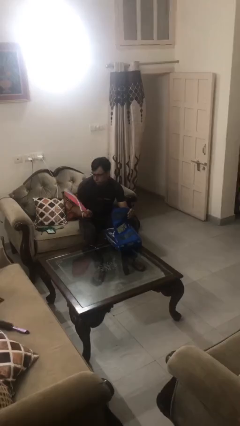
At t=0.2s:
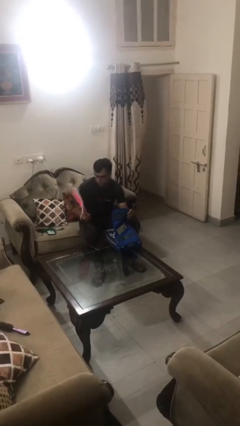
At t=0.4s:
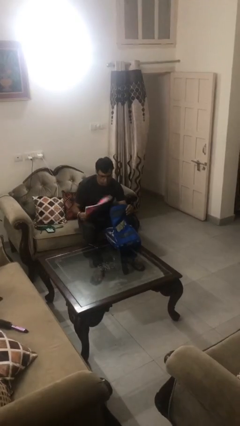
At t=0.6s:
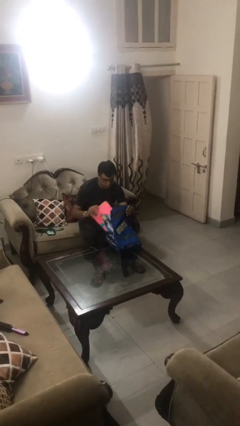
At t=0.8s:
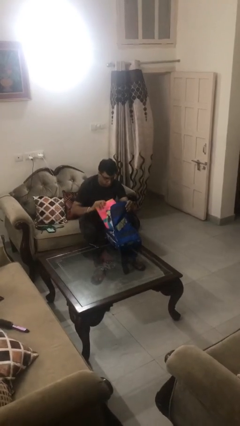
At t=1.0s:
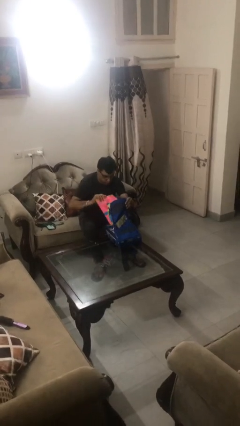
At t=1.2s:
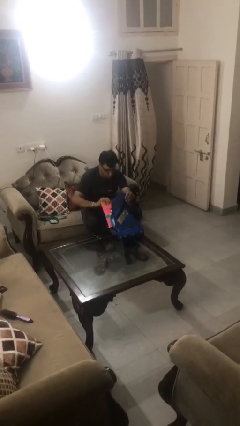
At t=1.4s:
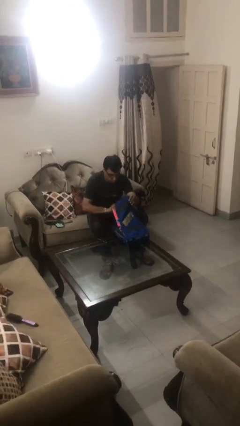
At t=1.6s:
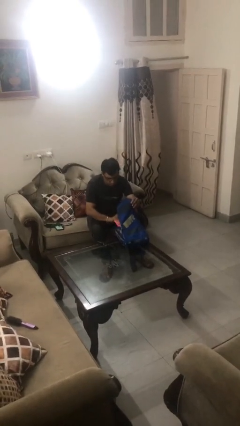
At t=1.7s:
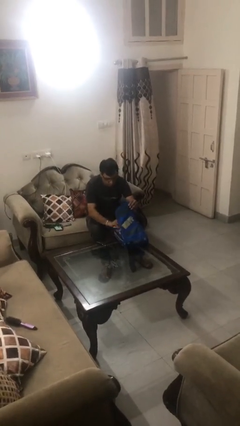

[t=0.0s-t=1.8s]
person puts object into backpack

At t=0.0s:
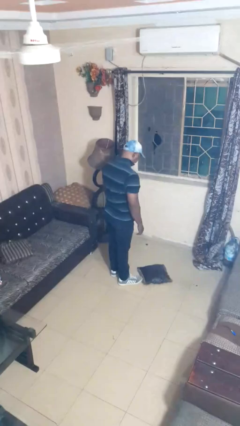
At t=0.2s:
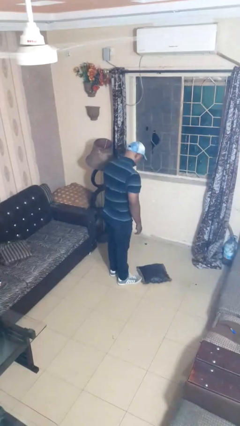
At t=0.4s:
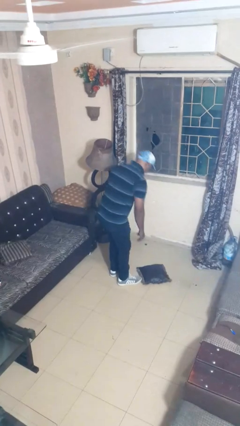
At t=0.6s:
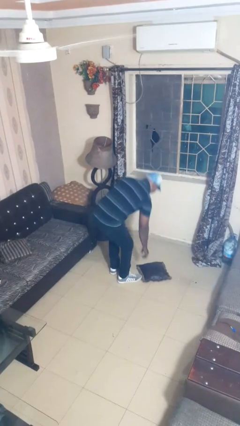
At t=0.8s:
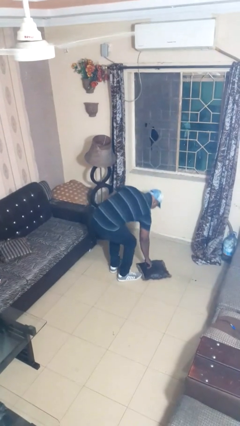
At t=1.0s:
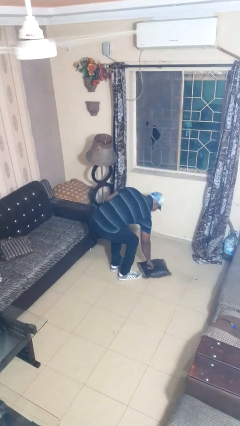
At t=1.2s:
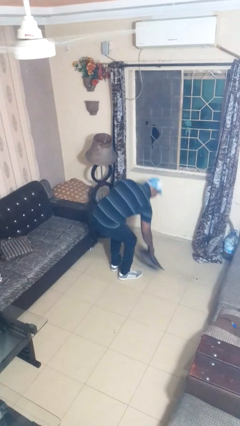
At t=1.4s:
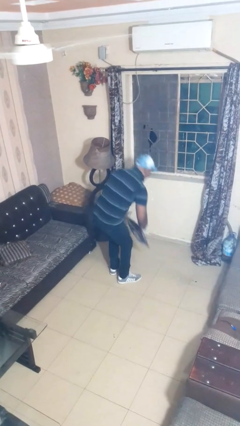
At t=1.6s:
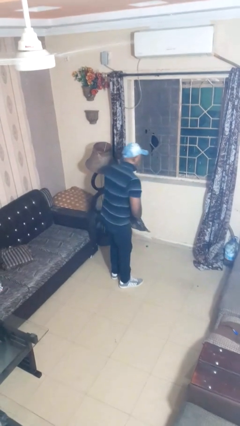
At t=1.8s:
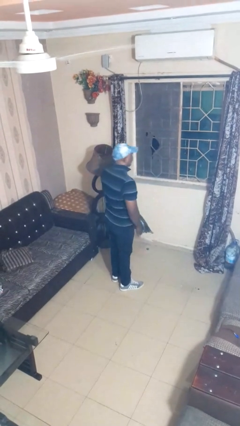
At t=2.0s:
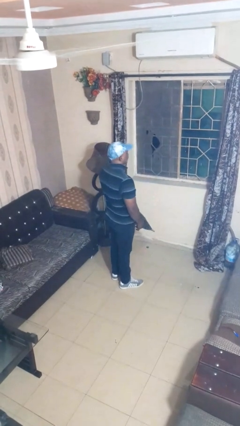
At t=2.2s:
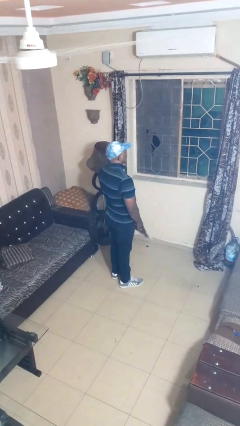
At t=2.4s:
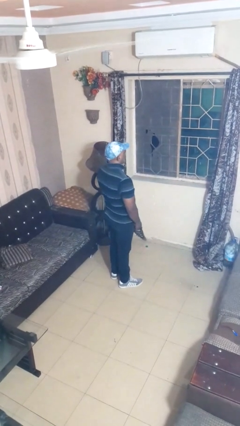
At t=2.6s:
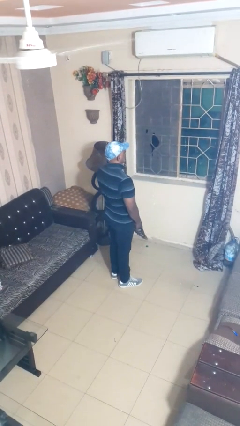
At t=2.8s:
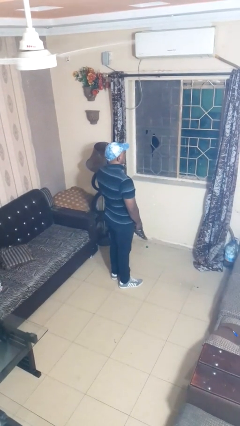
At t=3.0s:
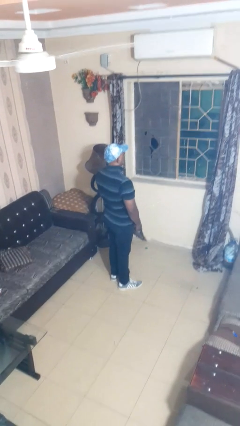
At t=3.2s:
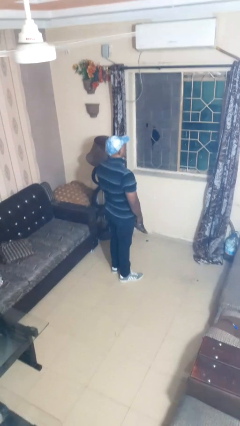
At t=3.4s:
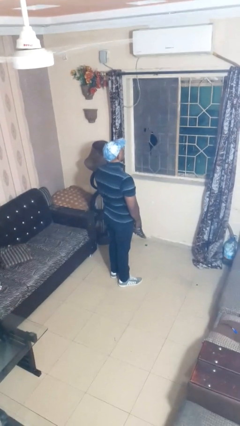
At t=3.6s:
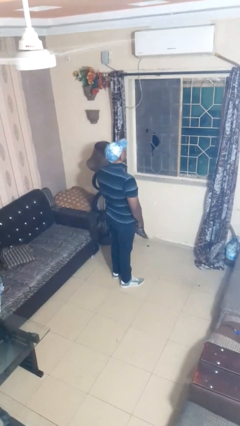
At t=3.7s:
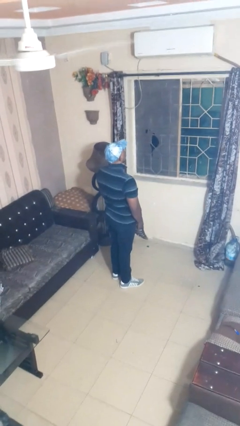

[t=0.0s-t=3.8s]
person picks up object from floor

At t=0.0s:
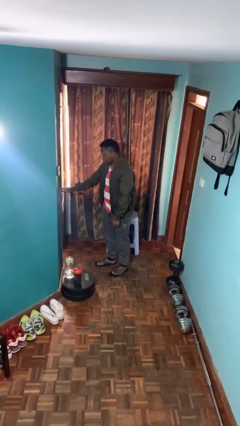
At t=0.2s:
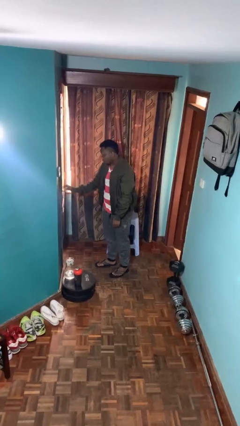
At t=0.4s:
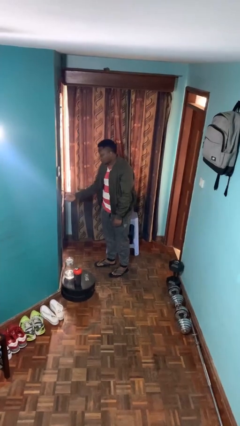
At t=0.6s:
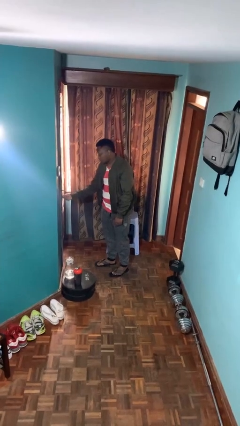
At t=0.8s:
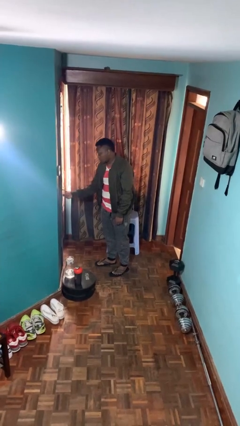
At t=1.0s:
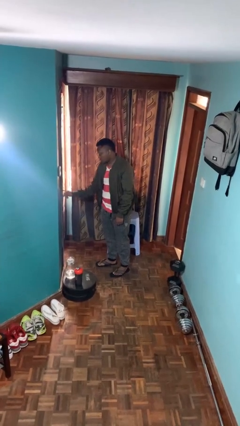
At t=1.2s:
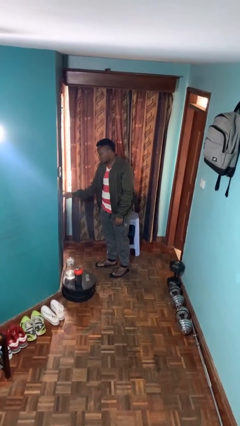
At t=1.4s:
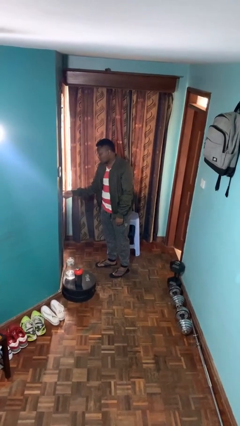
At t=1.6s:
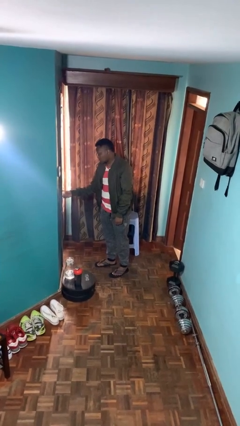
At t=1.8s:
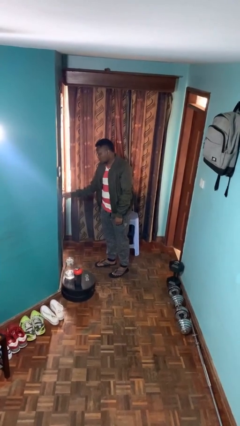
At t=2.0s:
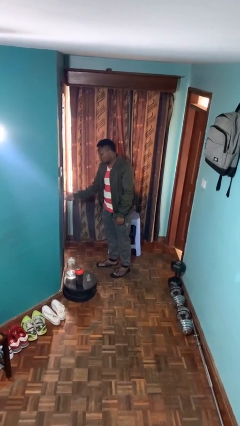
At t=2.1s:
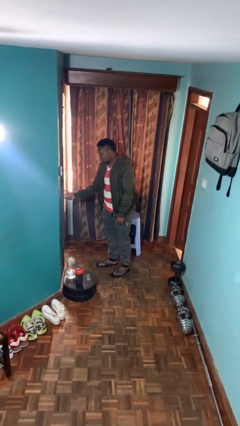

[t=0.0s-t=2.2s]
person locks door with keys

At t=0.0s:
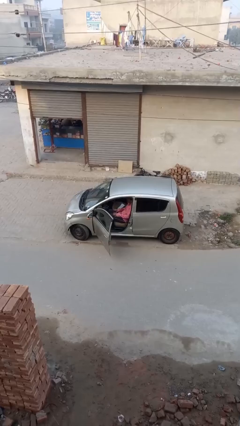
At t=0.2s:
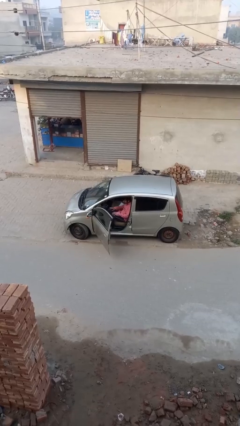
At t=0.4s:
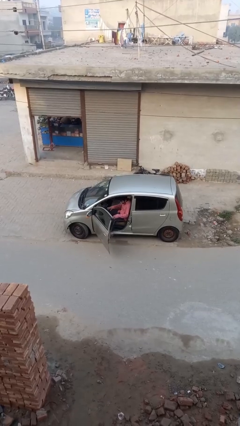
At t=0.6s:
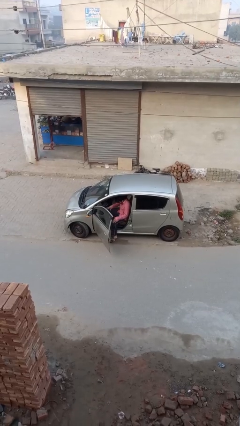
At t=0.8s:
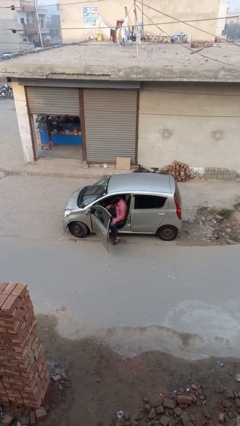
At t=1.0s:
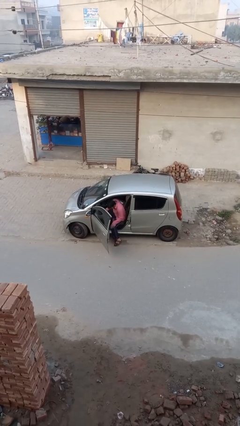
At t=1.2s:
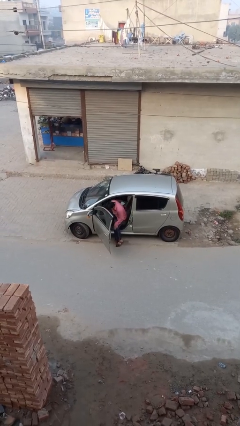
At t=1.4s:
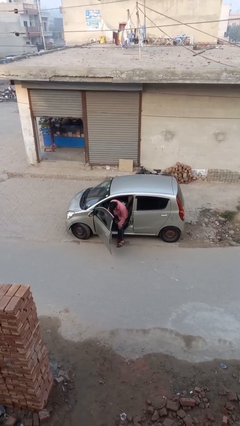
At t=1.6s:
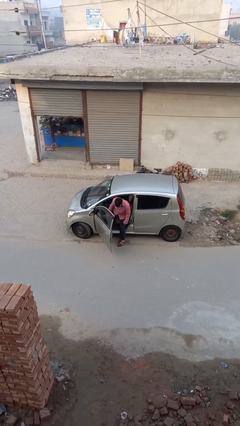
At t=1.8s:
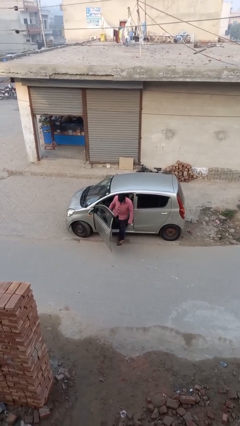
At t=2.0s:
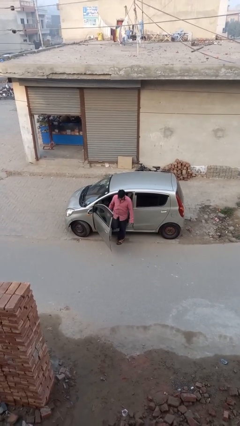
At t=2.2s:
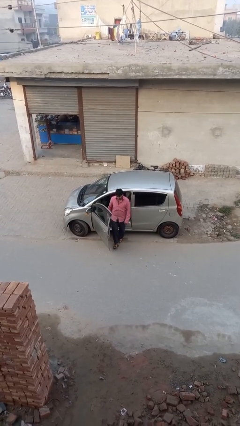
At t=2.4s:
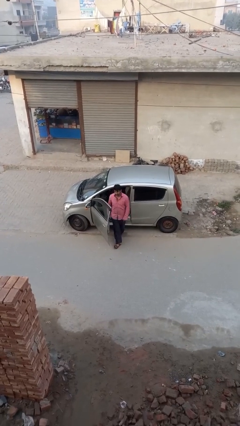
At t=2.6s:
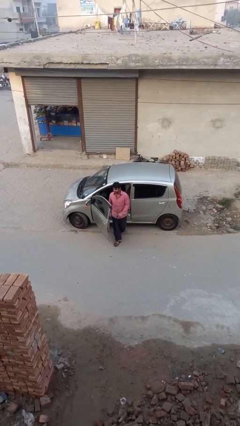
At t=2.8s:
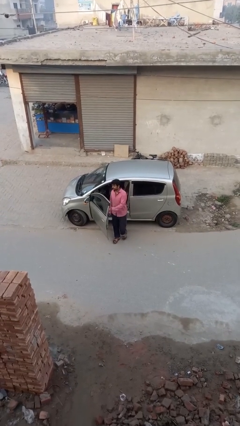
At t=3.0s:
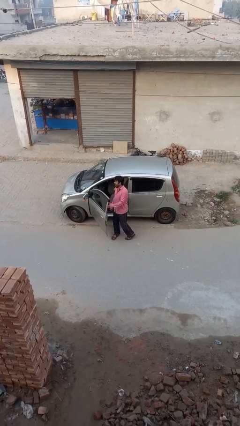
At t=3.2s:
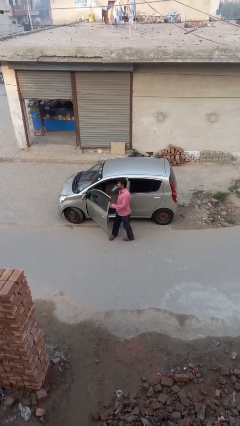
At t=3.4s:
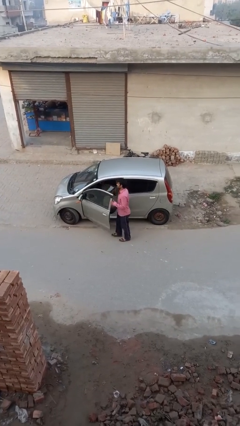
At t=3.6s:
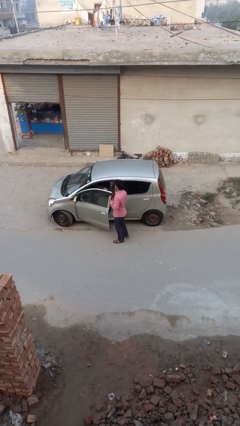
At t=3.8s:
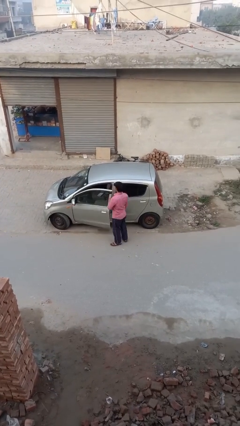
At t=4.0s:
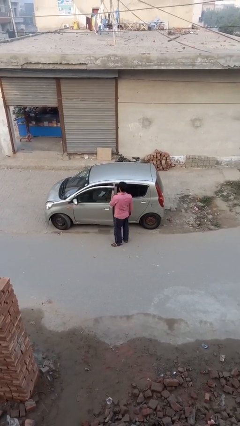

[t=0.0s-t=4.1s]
person exits car

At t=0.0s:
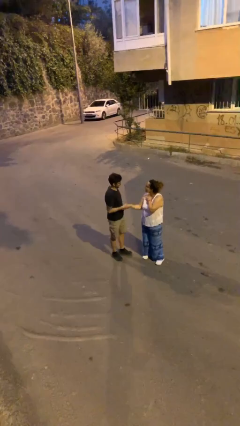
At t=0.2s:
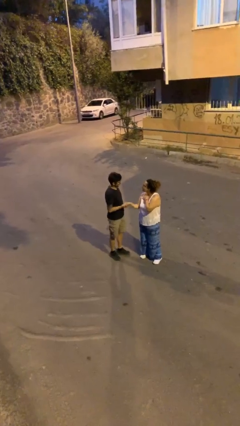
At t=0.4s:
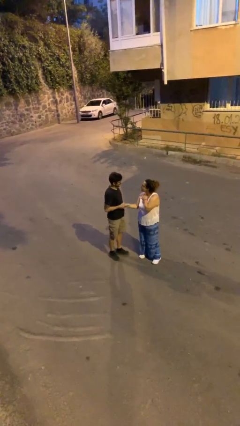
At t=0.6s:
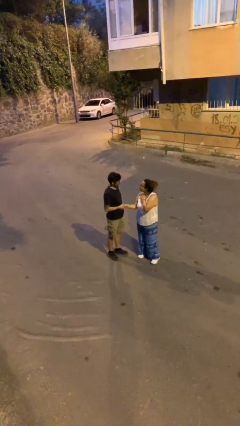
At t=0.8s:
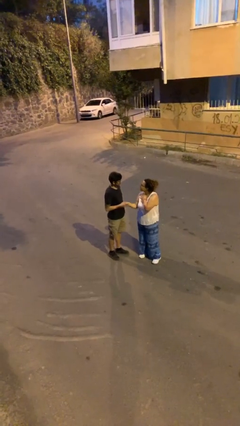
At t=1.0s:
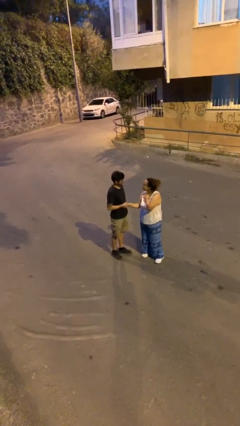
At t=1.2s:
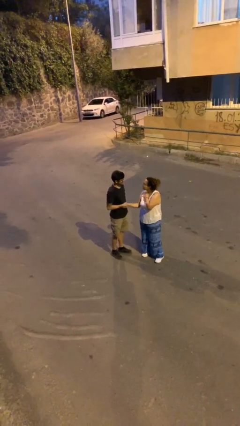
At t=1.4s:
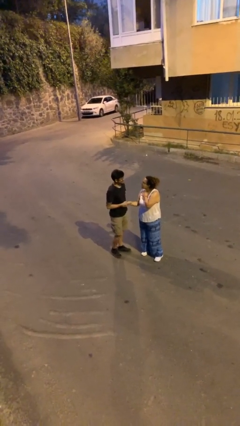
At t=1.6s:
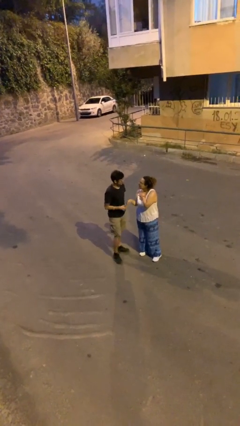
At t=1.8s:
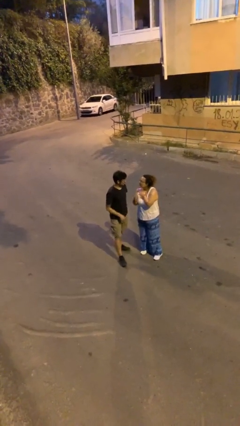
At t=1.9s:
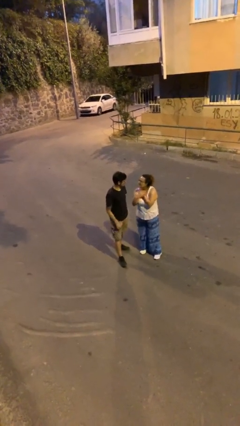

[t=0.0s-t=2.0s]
person shakes hand

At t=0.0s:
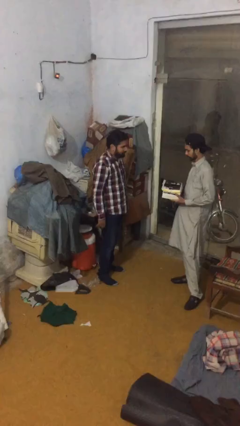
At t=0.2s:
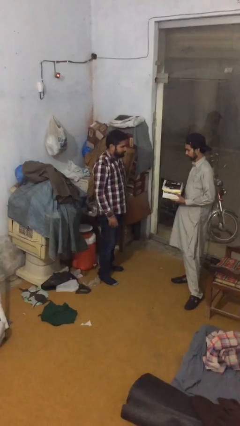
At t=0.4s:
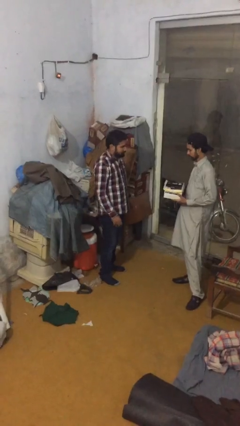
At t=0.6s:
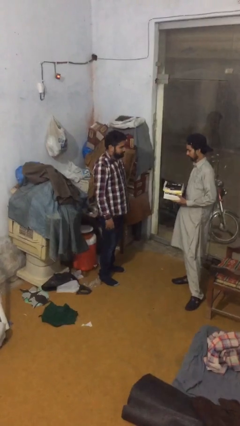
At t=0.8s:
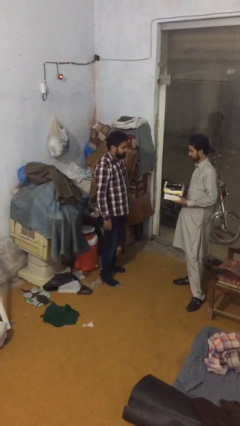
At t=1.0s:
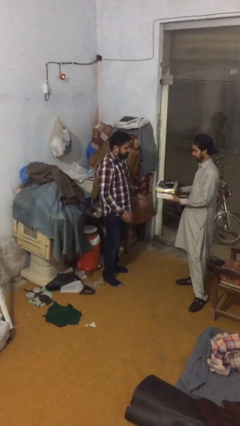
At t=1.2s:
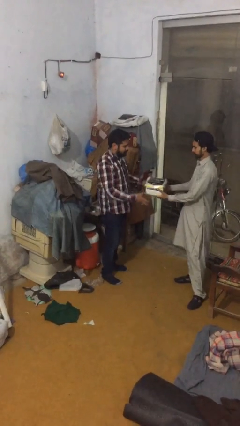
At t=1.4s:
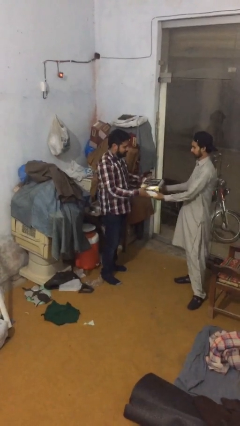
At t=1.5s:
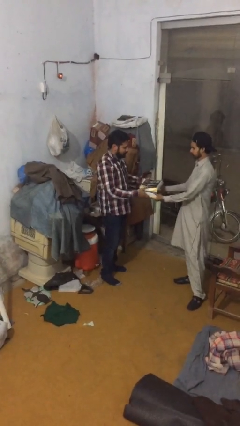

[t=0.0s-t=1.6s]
person transfers object to person

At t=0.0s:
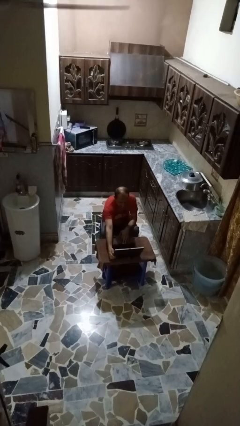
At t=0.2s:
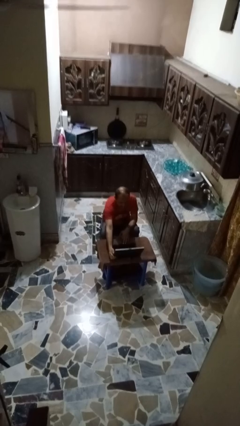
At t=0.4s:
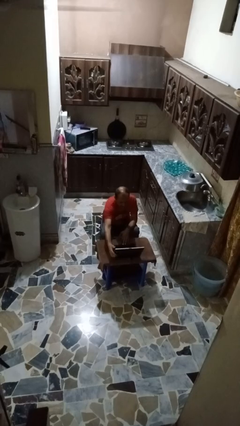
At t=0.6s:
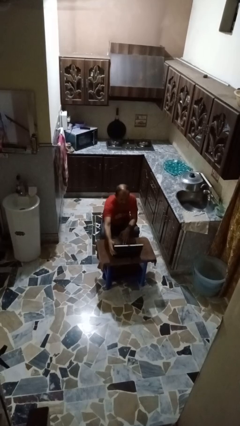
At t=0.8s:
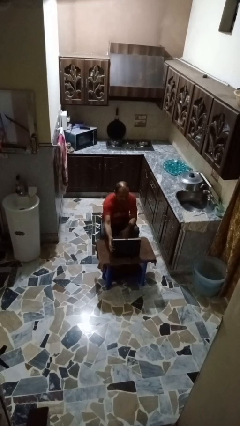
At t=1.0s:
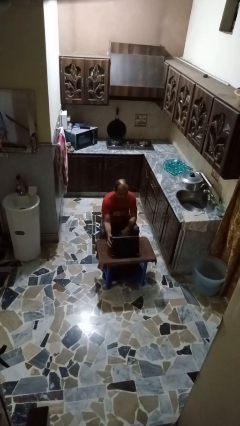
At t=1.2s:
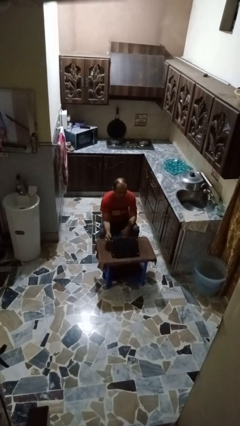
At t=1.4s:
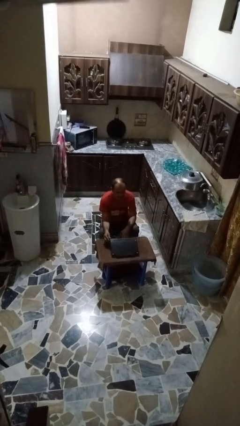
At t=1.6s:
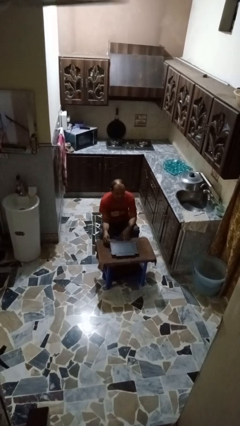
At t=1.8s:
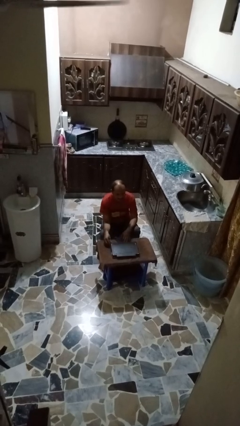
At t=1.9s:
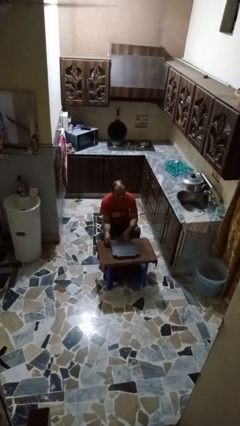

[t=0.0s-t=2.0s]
person closes laptop
